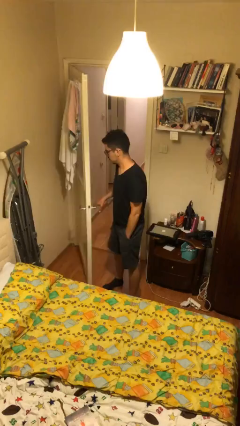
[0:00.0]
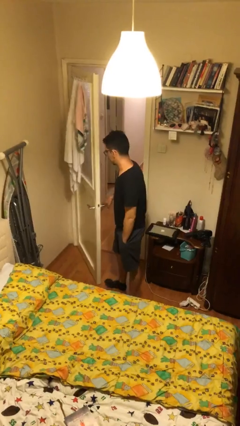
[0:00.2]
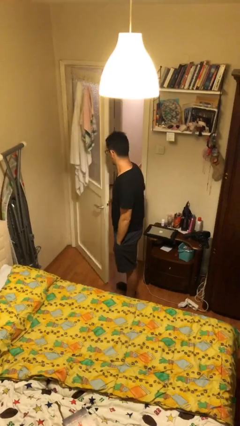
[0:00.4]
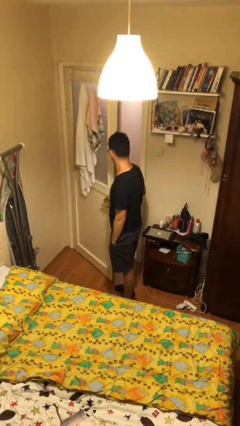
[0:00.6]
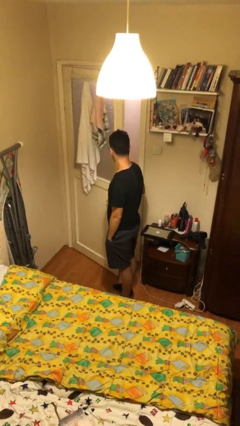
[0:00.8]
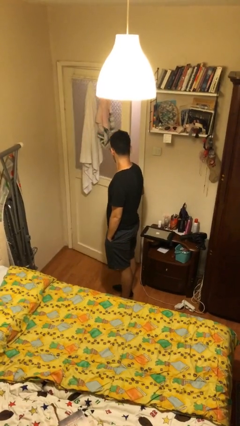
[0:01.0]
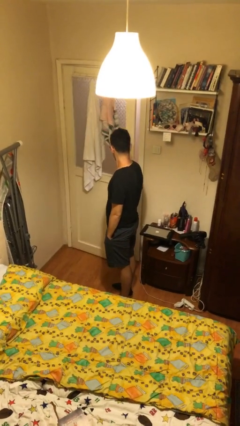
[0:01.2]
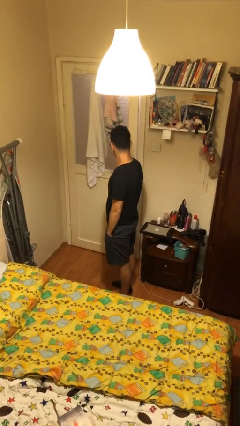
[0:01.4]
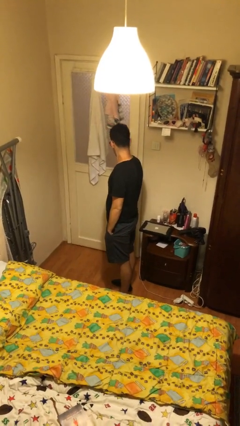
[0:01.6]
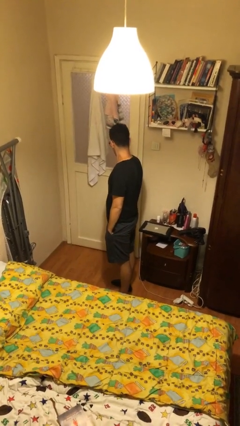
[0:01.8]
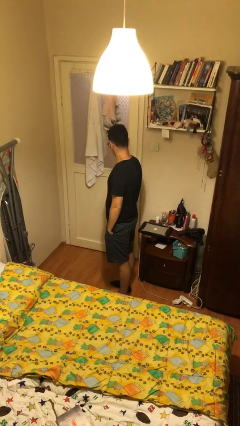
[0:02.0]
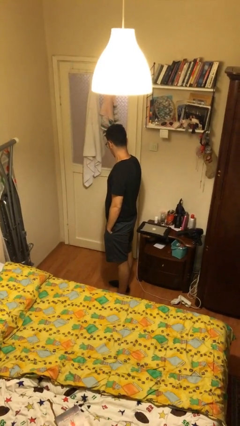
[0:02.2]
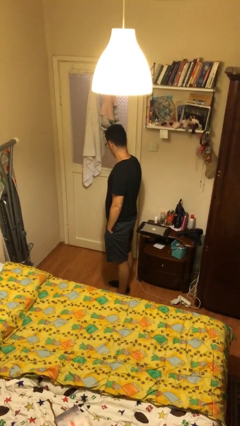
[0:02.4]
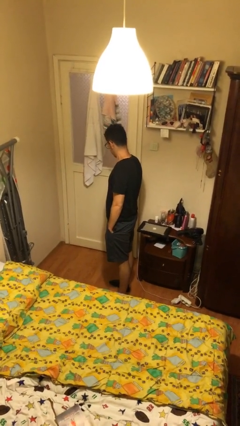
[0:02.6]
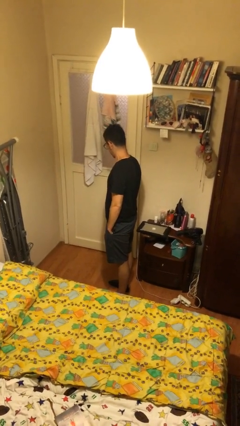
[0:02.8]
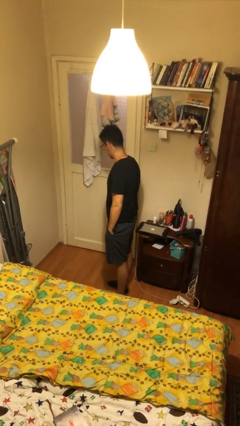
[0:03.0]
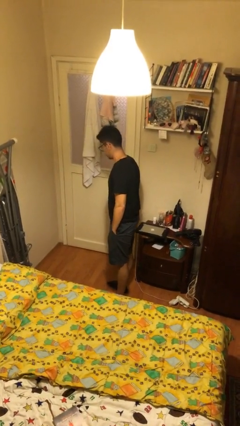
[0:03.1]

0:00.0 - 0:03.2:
person closes facility door

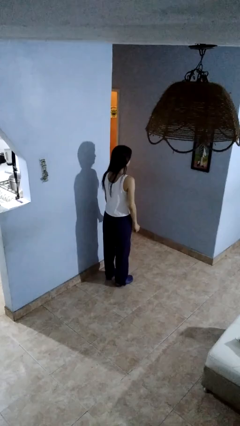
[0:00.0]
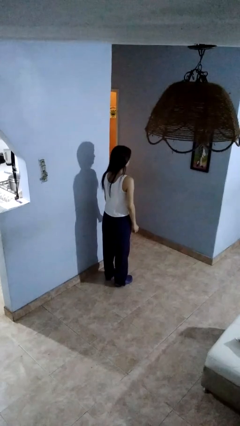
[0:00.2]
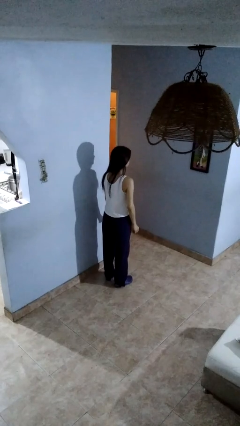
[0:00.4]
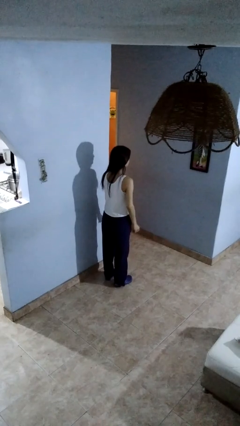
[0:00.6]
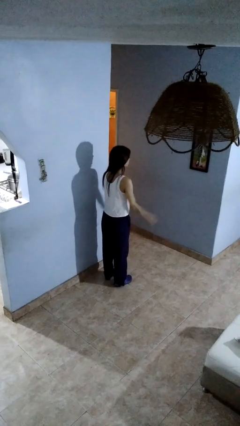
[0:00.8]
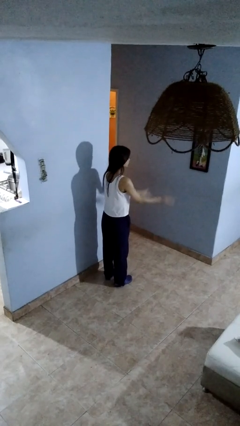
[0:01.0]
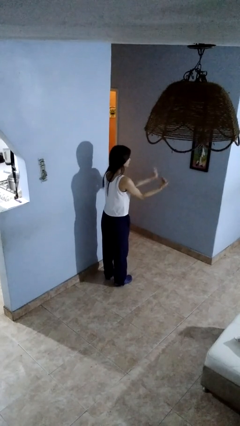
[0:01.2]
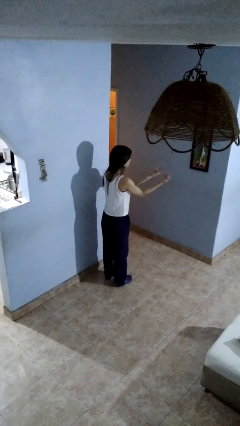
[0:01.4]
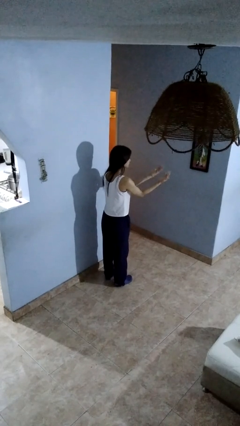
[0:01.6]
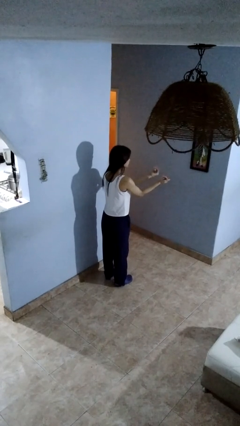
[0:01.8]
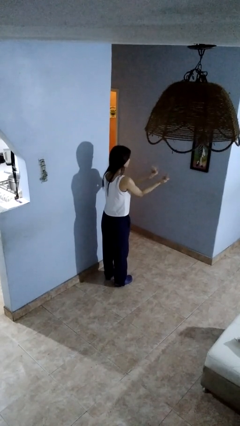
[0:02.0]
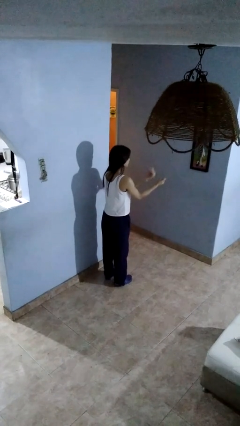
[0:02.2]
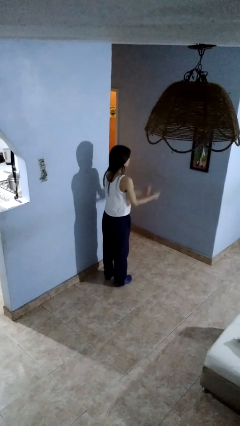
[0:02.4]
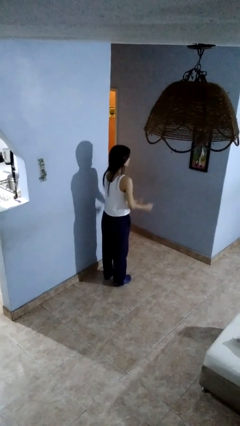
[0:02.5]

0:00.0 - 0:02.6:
person gestures come here

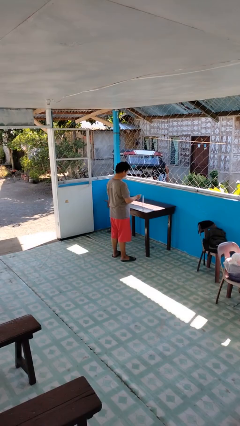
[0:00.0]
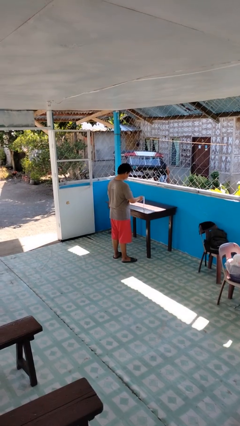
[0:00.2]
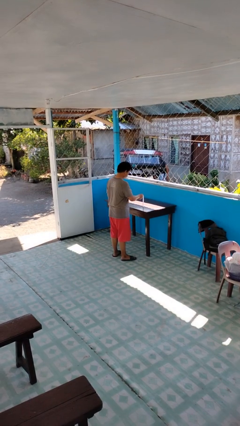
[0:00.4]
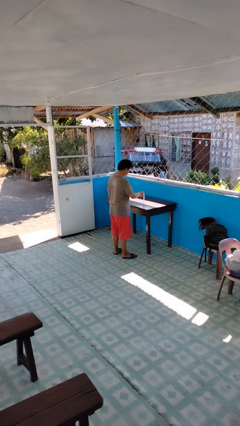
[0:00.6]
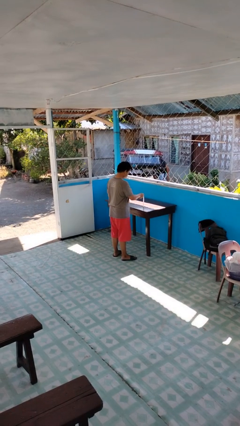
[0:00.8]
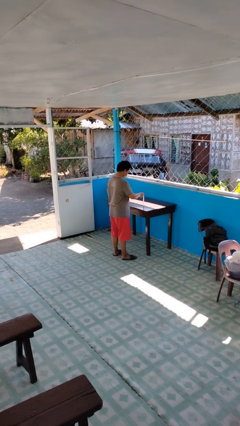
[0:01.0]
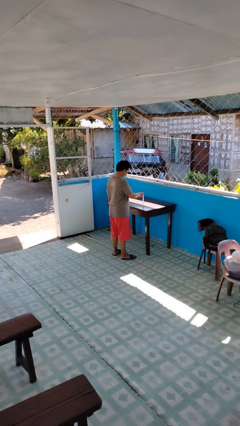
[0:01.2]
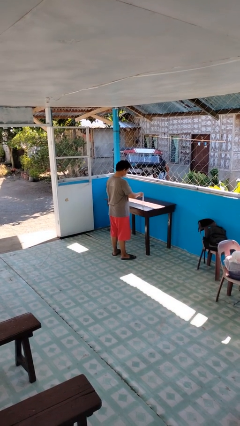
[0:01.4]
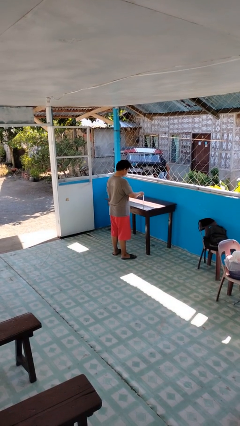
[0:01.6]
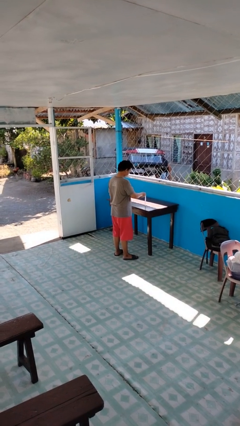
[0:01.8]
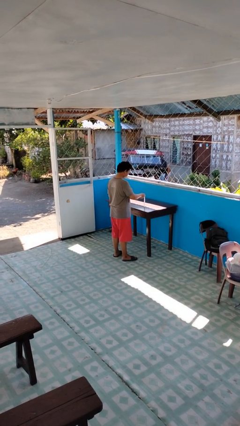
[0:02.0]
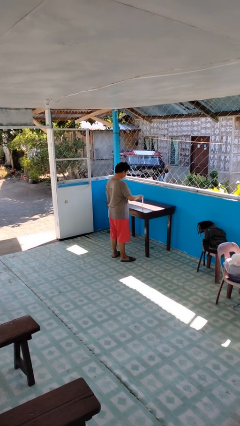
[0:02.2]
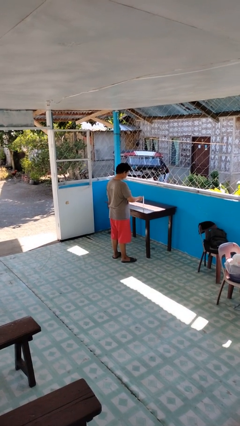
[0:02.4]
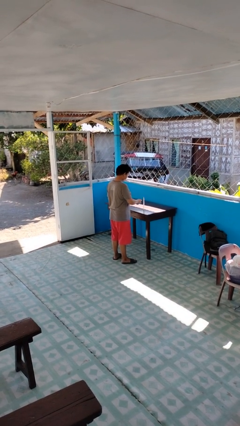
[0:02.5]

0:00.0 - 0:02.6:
person lights candle

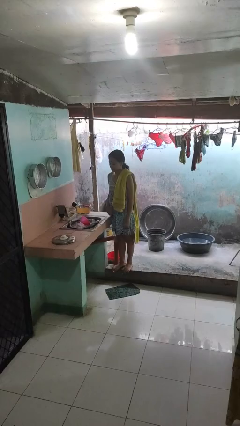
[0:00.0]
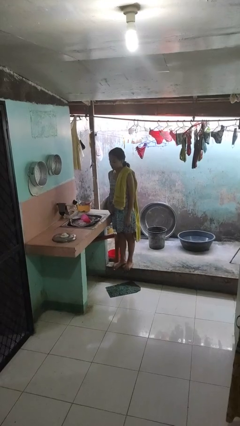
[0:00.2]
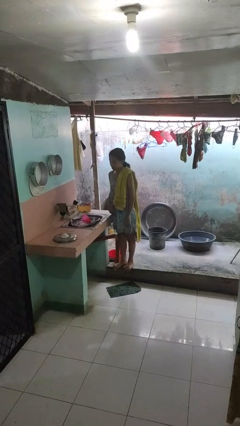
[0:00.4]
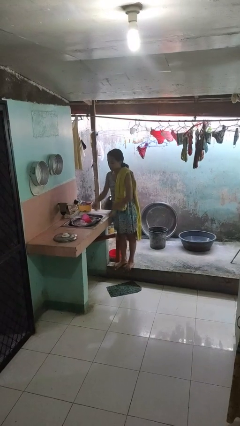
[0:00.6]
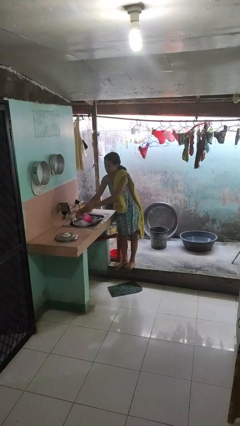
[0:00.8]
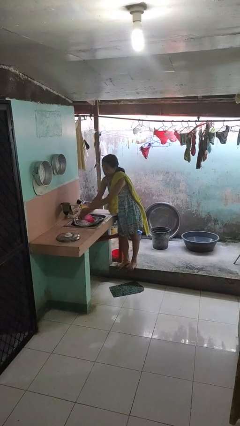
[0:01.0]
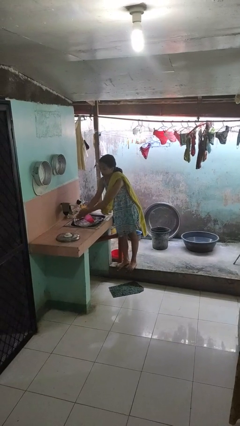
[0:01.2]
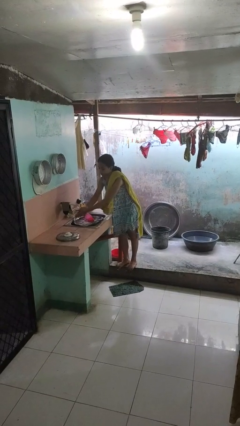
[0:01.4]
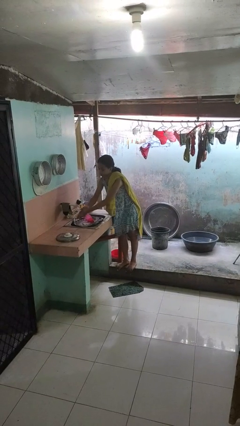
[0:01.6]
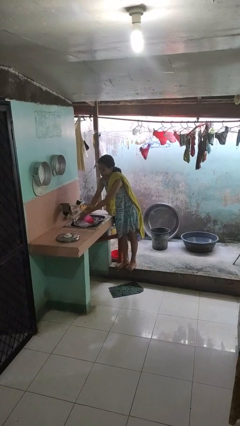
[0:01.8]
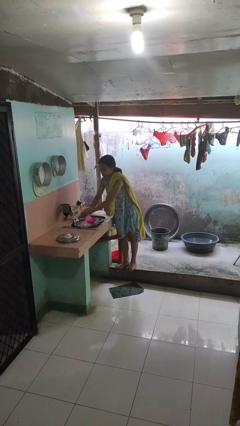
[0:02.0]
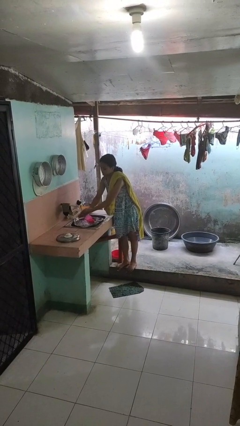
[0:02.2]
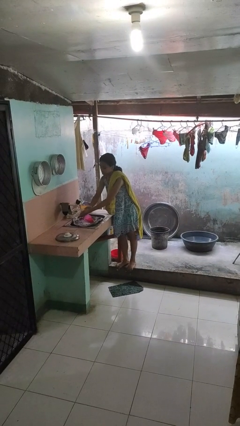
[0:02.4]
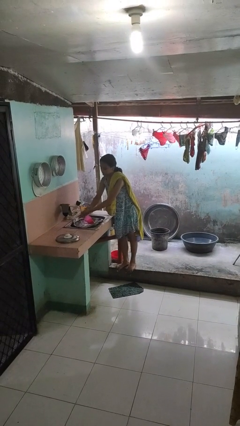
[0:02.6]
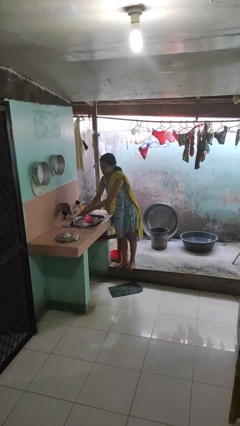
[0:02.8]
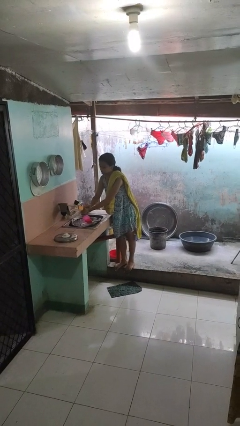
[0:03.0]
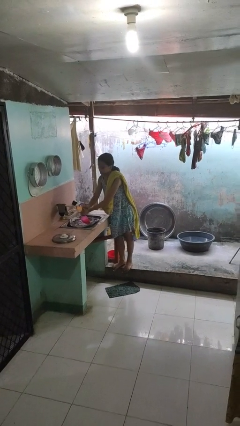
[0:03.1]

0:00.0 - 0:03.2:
person washes hands

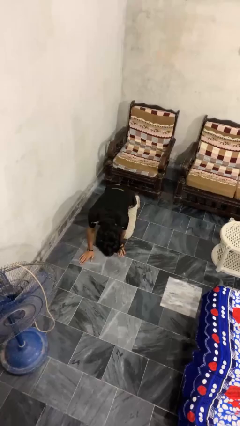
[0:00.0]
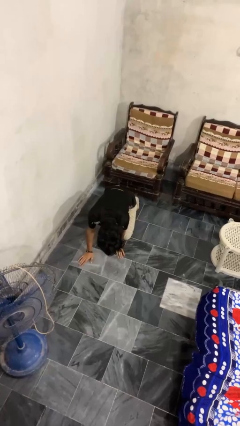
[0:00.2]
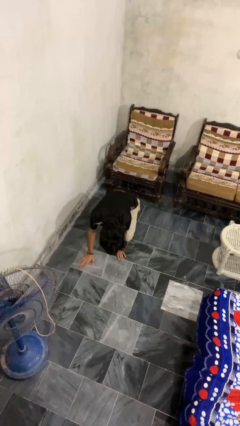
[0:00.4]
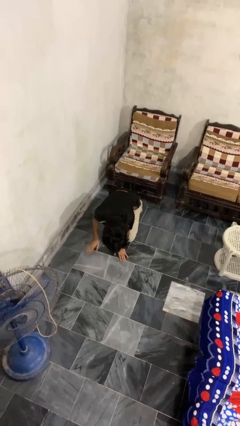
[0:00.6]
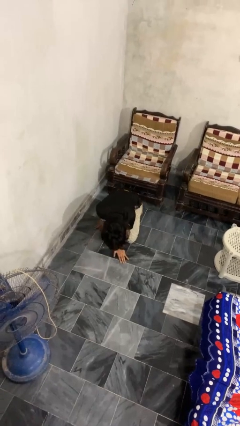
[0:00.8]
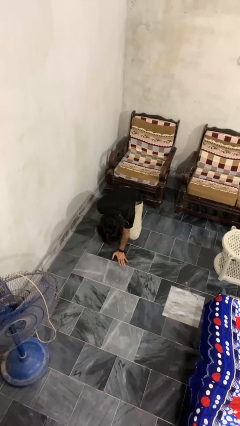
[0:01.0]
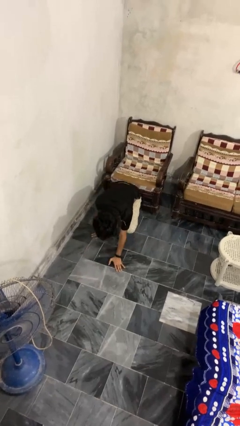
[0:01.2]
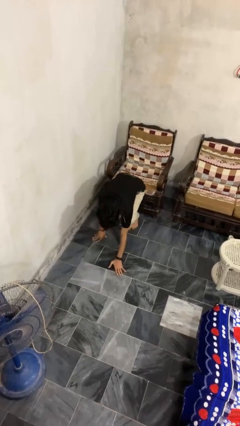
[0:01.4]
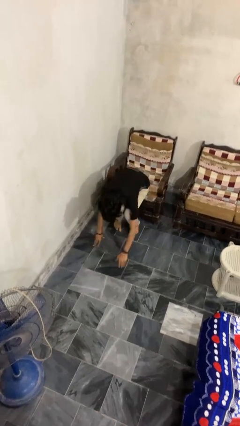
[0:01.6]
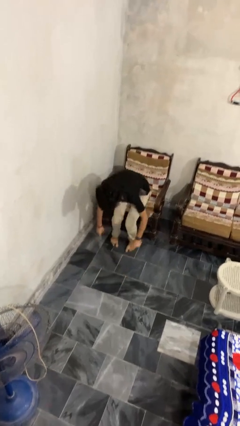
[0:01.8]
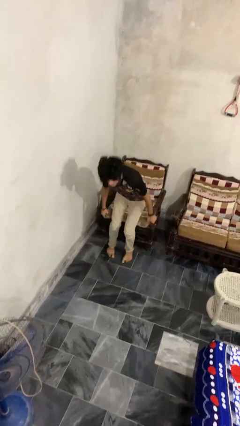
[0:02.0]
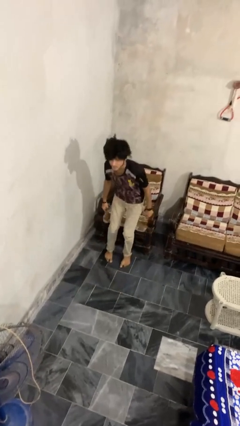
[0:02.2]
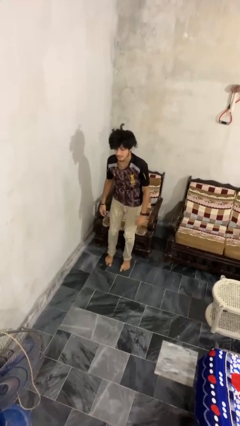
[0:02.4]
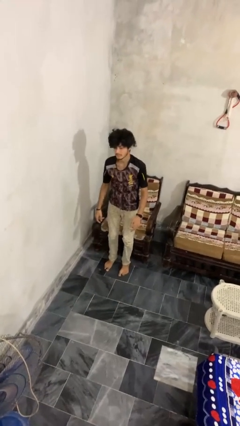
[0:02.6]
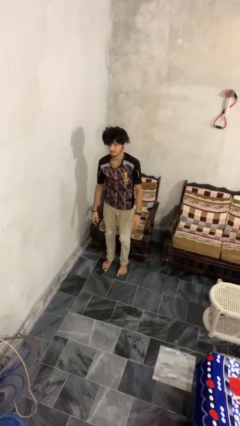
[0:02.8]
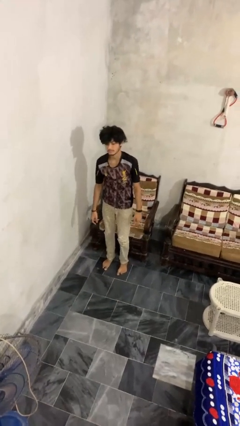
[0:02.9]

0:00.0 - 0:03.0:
person stands up from floor

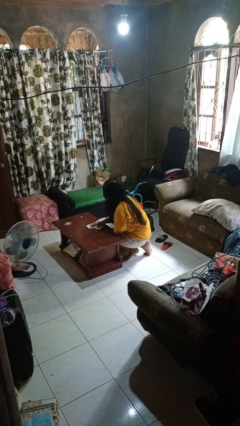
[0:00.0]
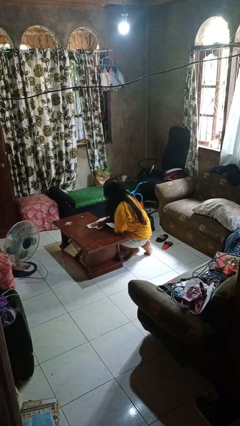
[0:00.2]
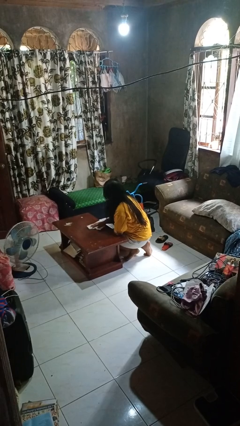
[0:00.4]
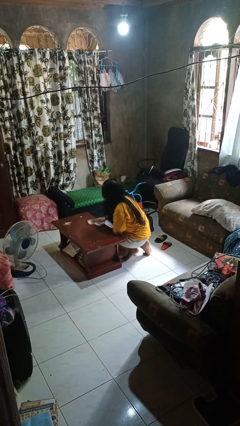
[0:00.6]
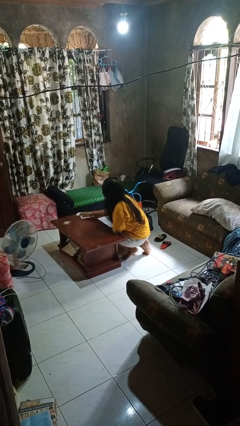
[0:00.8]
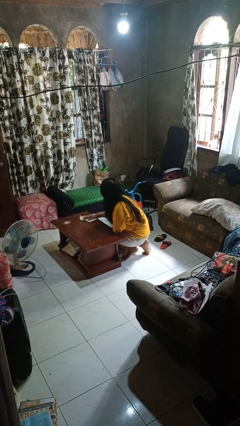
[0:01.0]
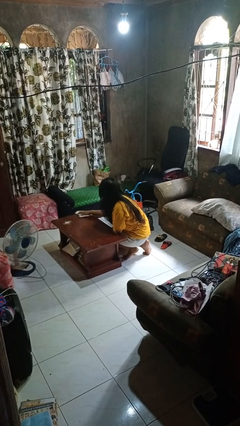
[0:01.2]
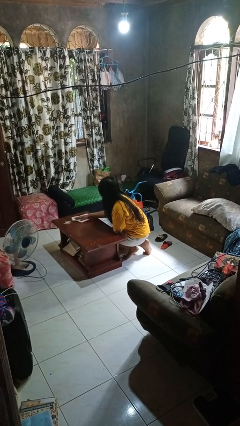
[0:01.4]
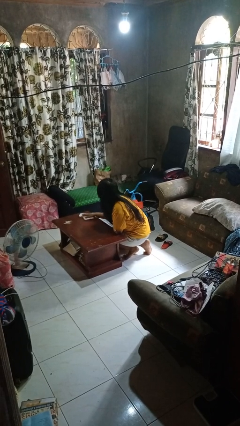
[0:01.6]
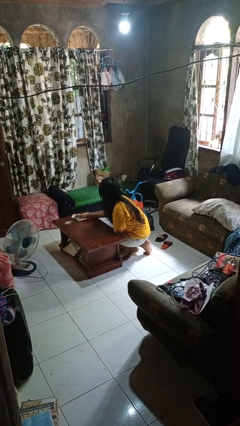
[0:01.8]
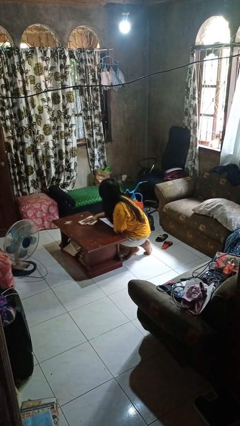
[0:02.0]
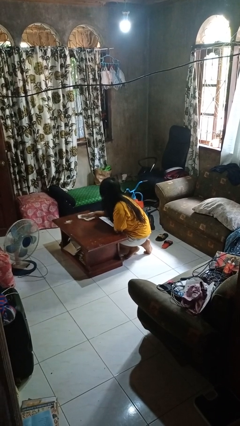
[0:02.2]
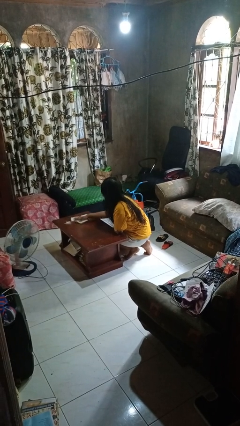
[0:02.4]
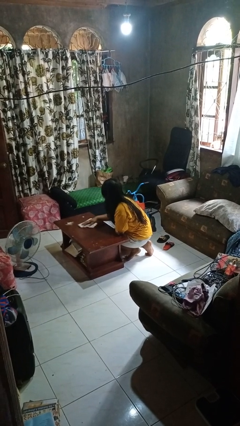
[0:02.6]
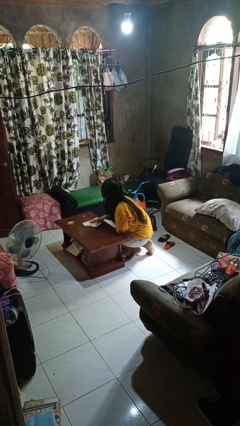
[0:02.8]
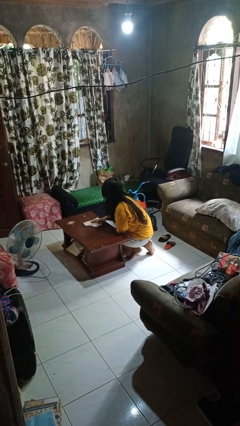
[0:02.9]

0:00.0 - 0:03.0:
person cleans table with rag
